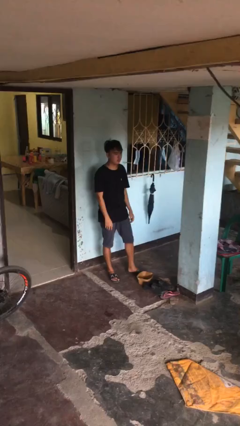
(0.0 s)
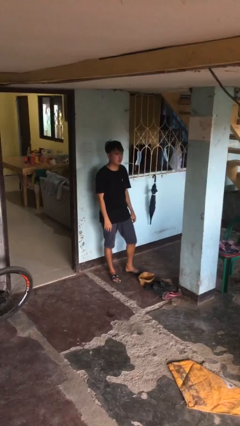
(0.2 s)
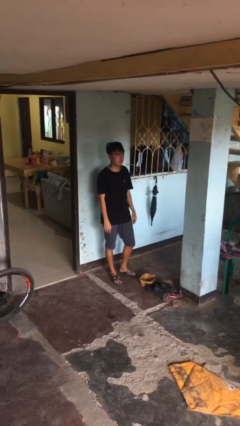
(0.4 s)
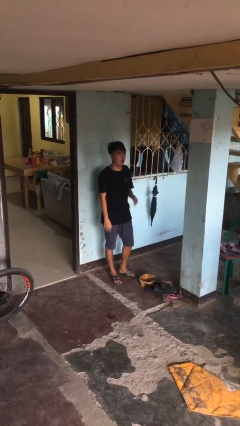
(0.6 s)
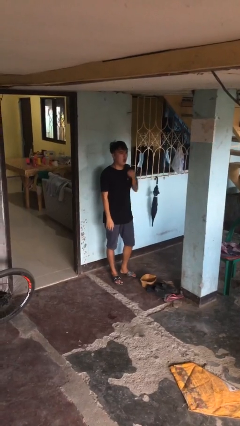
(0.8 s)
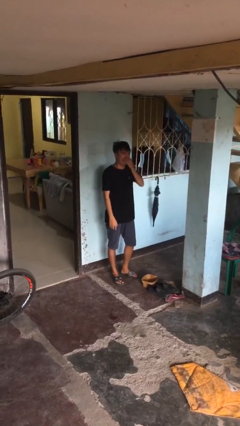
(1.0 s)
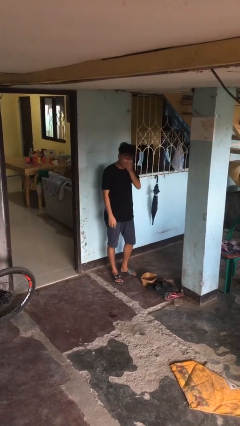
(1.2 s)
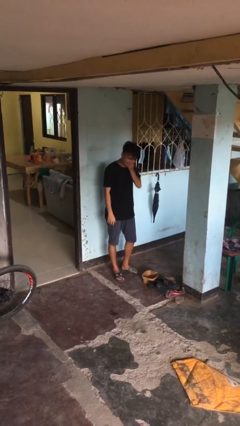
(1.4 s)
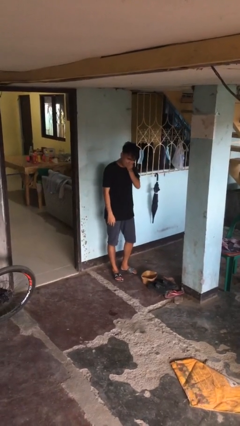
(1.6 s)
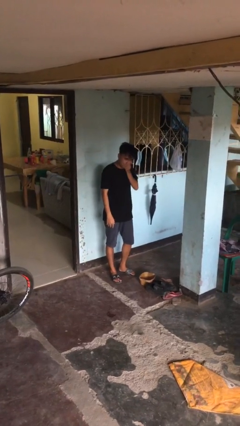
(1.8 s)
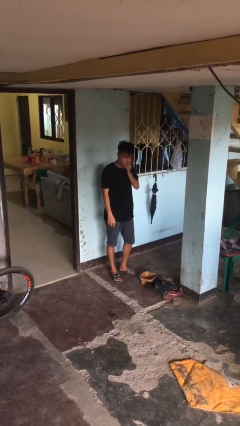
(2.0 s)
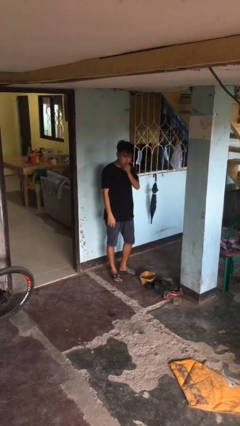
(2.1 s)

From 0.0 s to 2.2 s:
person sneezes into hand

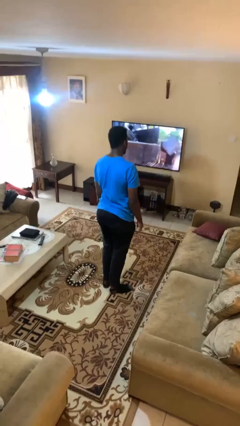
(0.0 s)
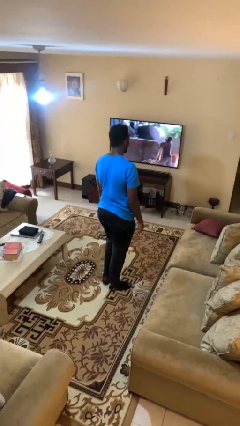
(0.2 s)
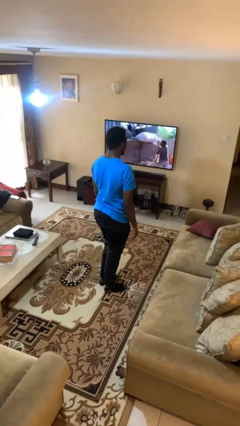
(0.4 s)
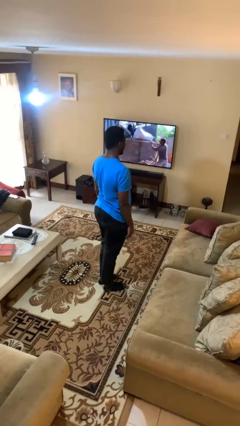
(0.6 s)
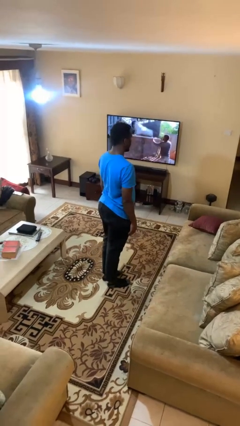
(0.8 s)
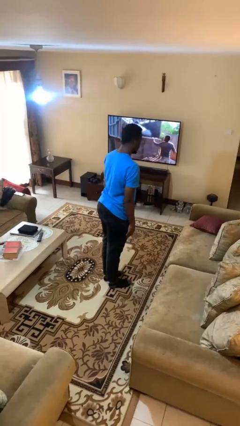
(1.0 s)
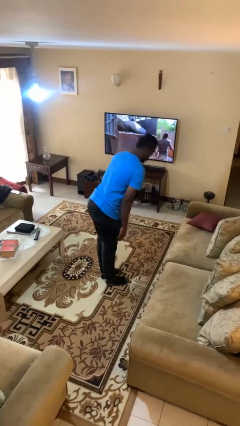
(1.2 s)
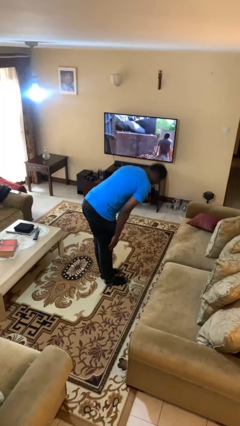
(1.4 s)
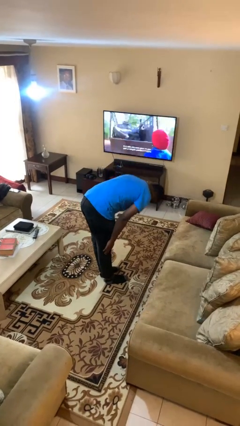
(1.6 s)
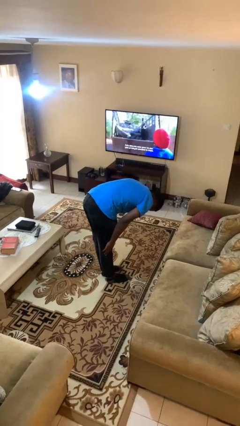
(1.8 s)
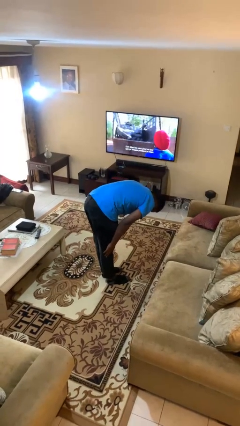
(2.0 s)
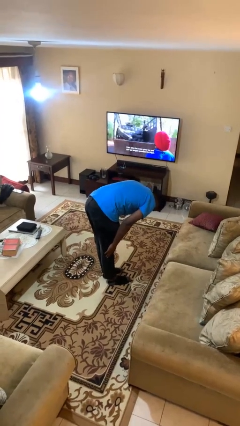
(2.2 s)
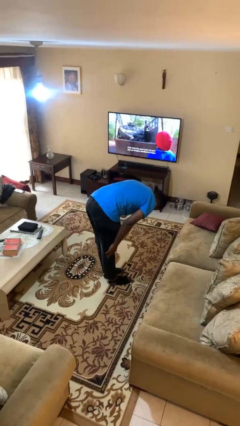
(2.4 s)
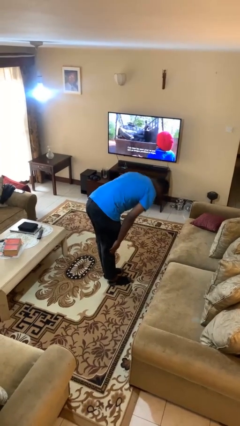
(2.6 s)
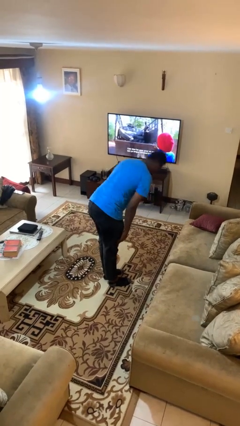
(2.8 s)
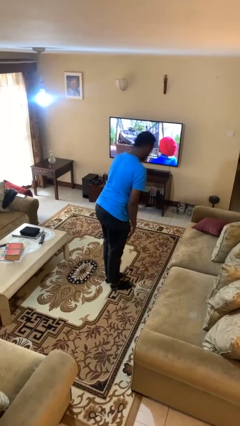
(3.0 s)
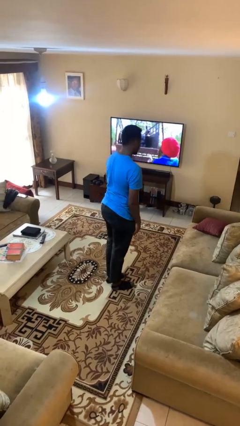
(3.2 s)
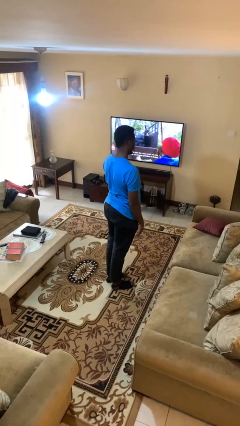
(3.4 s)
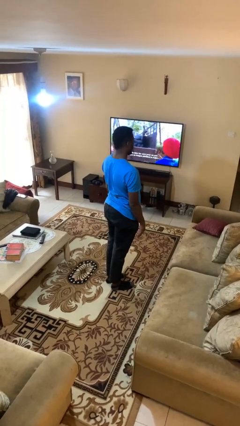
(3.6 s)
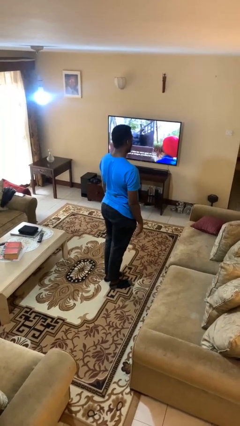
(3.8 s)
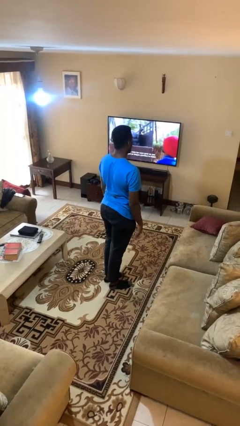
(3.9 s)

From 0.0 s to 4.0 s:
person bows

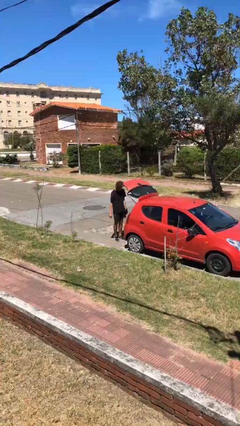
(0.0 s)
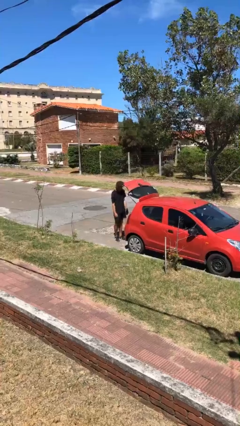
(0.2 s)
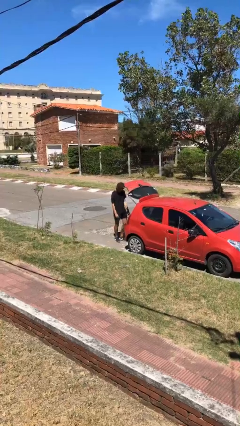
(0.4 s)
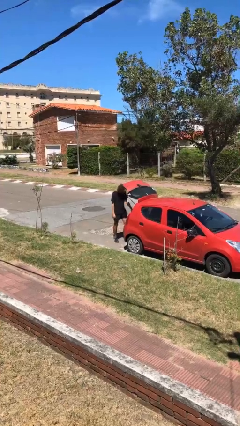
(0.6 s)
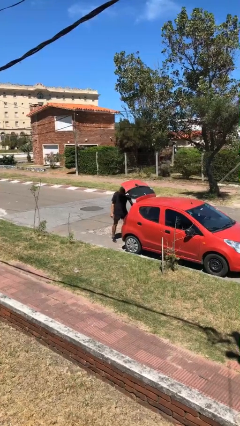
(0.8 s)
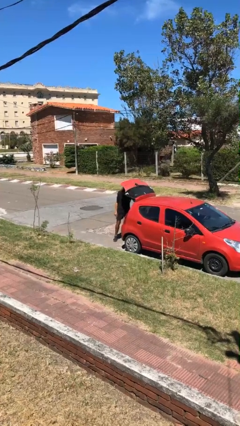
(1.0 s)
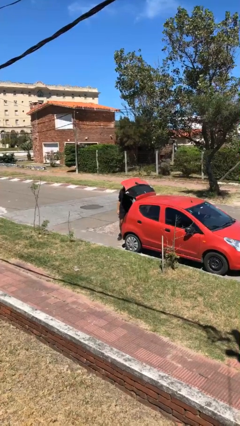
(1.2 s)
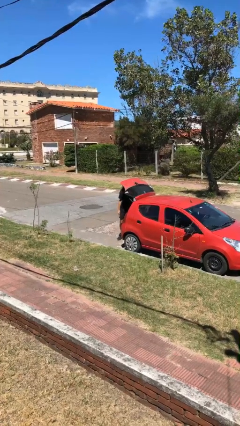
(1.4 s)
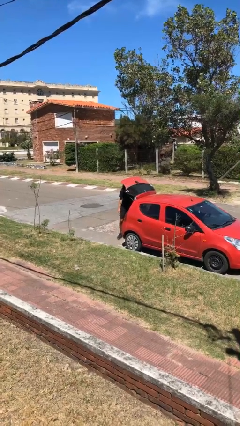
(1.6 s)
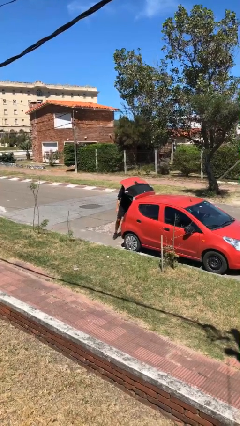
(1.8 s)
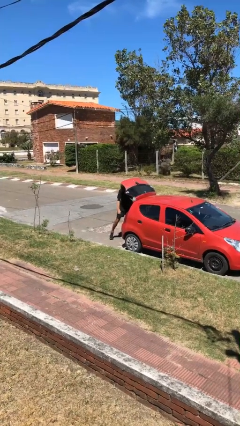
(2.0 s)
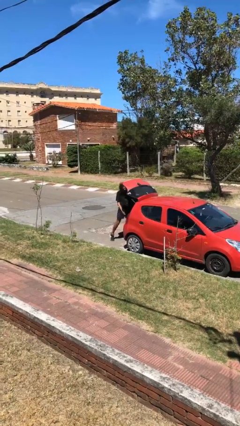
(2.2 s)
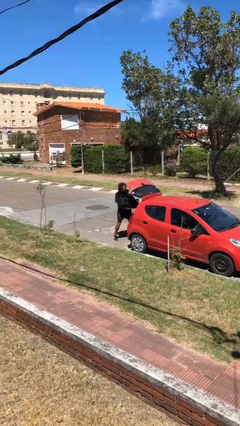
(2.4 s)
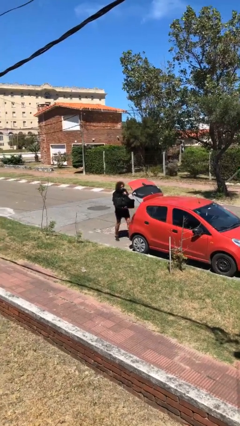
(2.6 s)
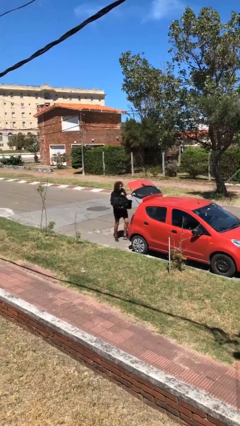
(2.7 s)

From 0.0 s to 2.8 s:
person unloads car

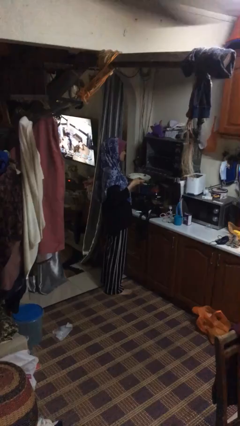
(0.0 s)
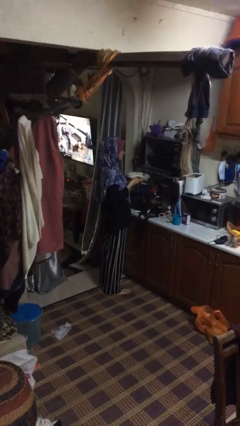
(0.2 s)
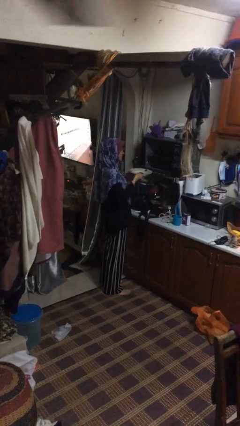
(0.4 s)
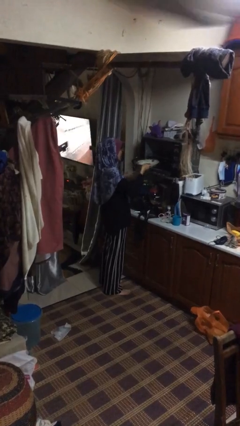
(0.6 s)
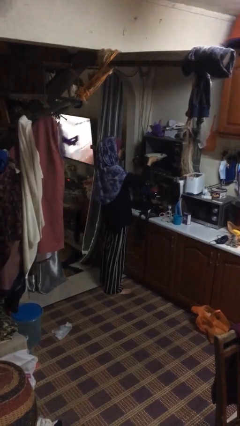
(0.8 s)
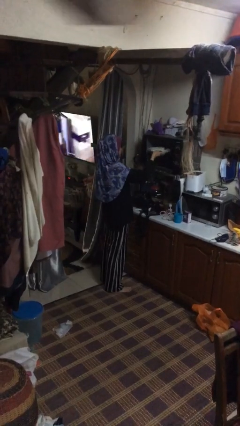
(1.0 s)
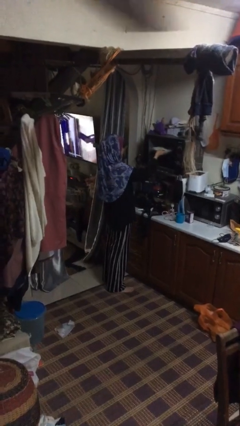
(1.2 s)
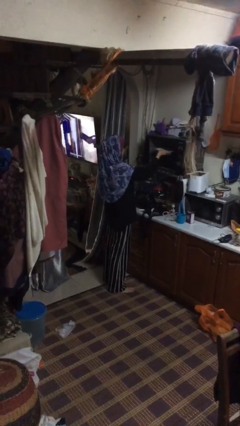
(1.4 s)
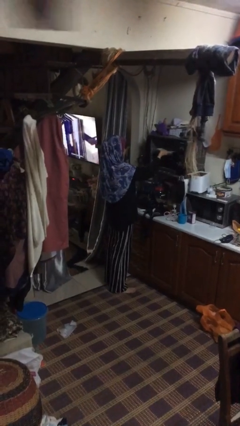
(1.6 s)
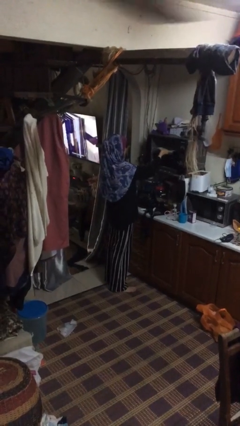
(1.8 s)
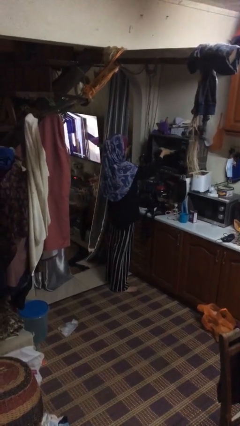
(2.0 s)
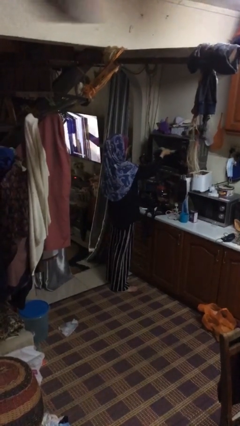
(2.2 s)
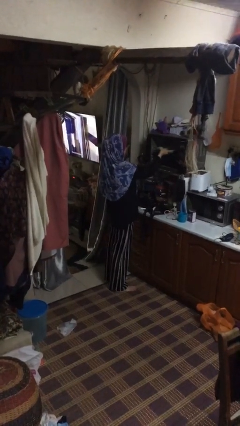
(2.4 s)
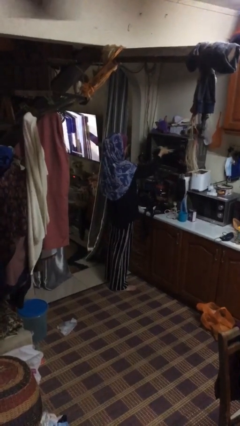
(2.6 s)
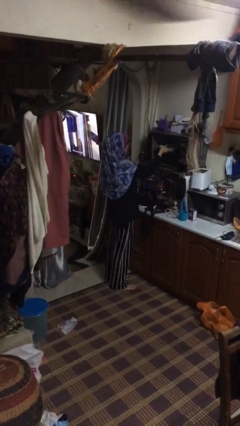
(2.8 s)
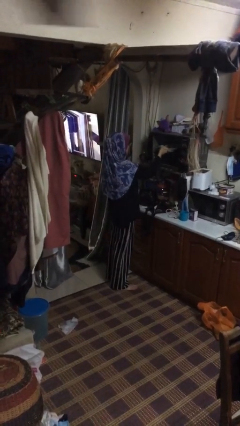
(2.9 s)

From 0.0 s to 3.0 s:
person puts object into oven

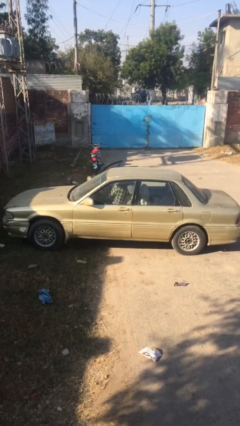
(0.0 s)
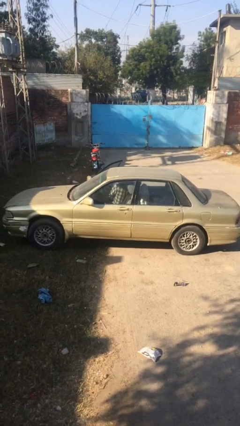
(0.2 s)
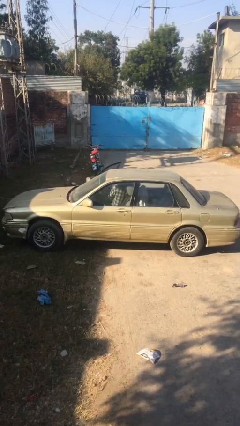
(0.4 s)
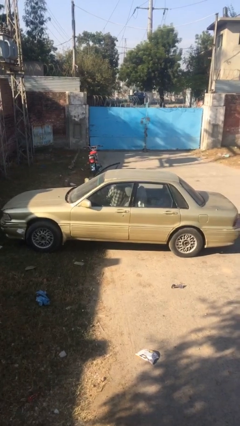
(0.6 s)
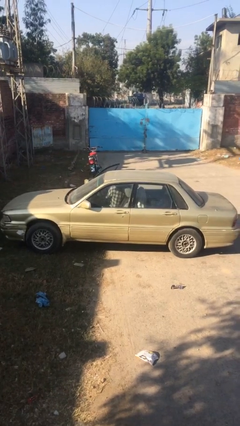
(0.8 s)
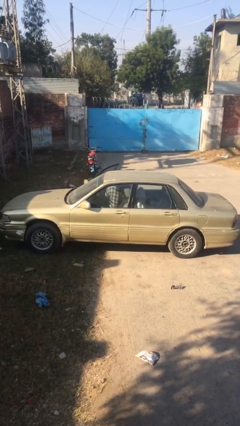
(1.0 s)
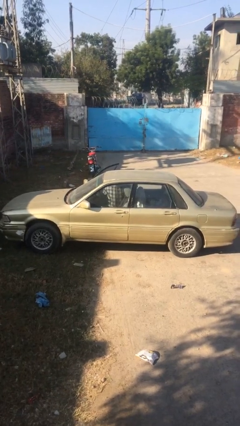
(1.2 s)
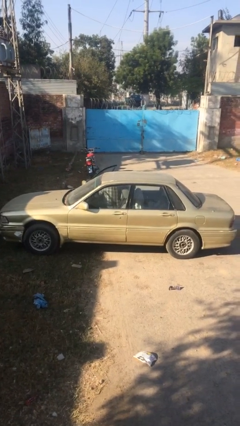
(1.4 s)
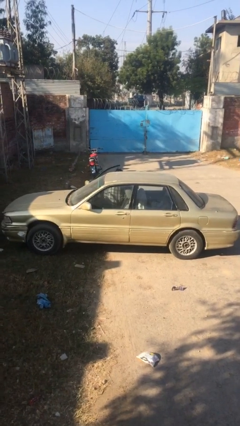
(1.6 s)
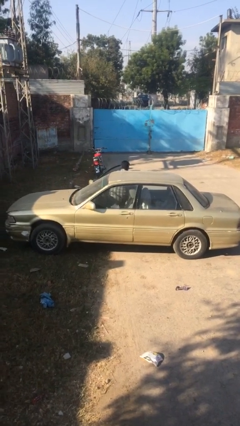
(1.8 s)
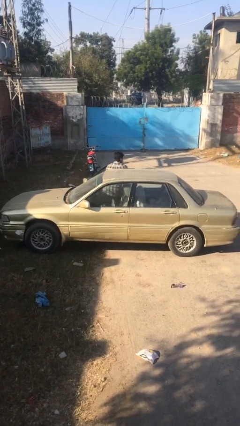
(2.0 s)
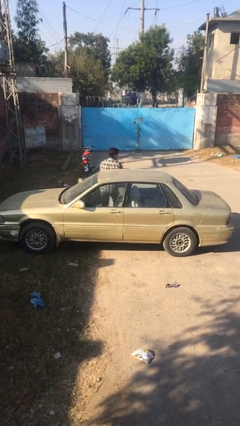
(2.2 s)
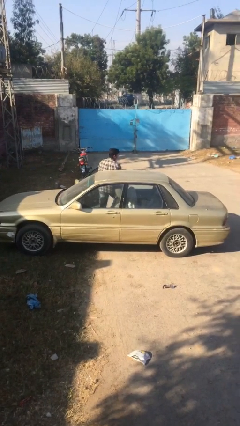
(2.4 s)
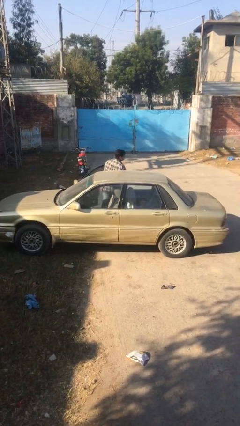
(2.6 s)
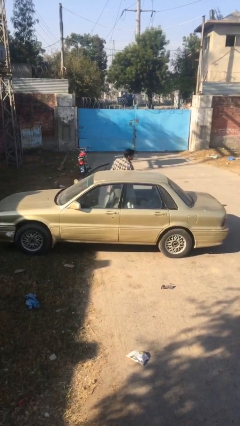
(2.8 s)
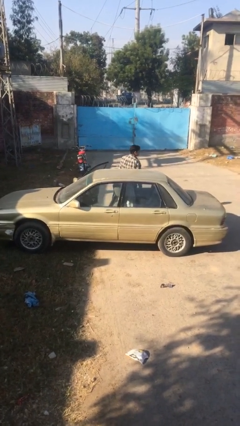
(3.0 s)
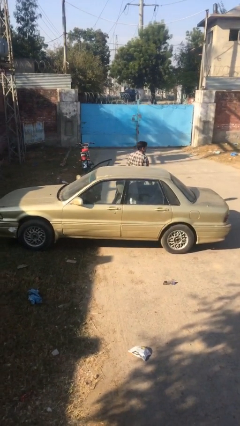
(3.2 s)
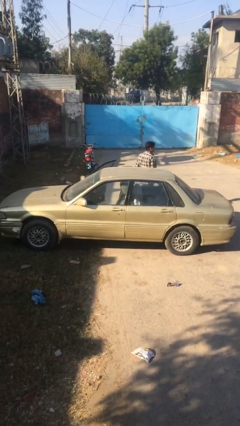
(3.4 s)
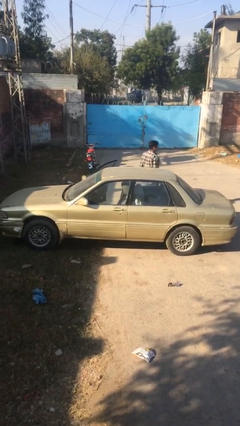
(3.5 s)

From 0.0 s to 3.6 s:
person exits car

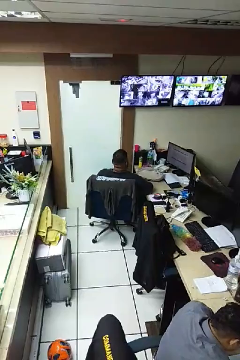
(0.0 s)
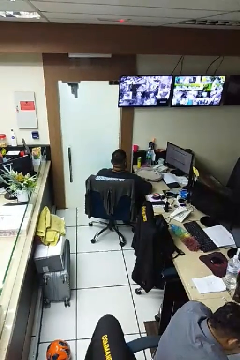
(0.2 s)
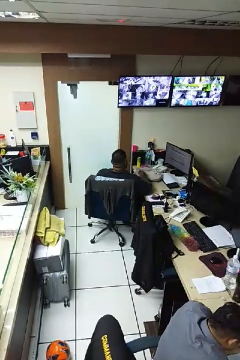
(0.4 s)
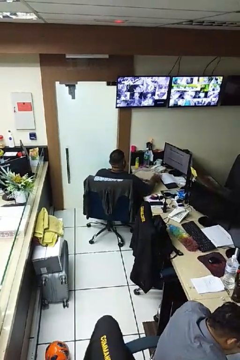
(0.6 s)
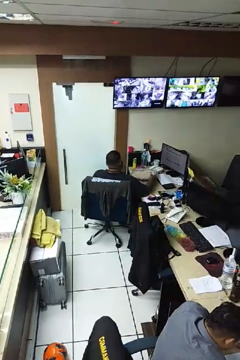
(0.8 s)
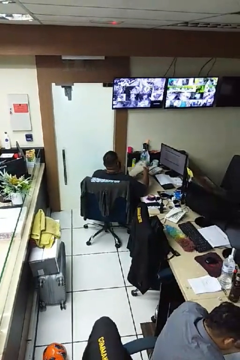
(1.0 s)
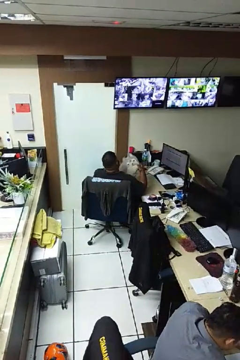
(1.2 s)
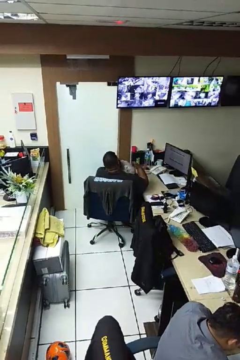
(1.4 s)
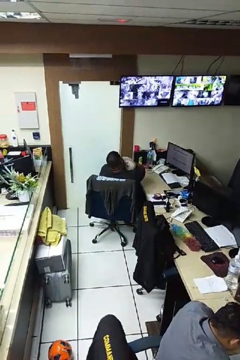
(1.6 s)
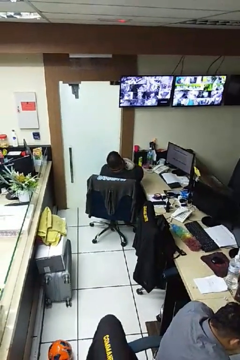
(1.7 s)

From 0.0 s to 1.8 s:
person hugs stuffed animal

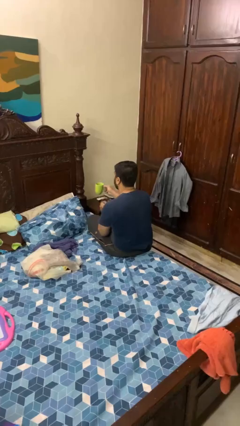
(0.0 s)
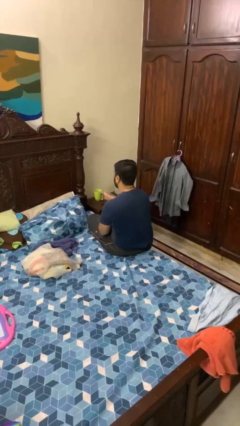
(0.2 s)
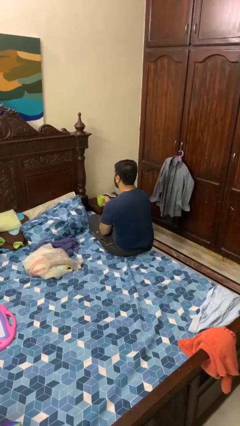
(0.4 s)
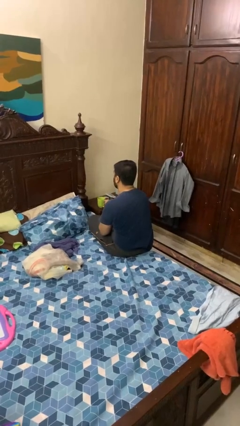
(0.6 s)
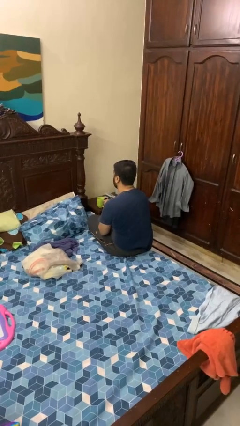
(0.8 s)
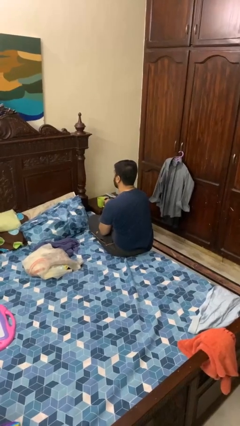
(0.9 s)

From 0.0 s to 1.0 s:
person puts down object on table
